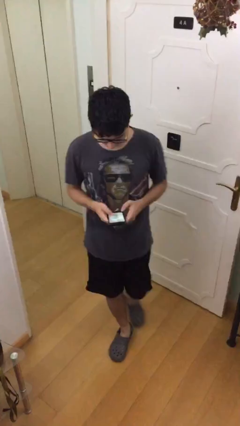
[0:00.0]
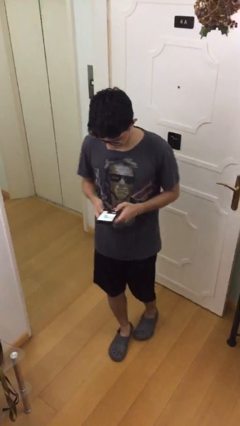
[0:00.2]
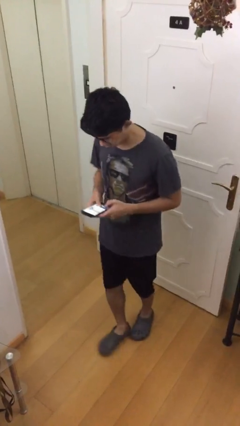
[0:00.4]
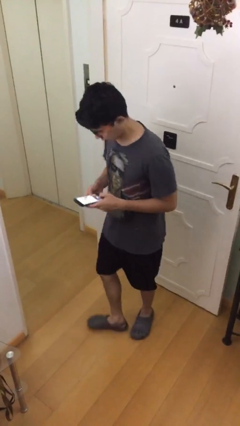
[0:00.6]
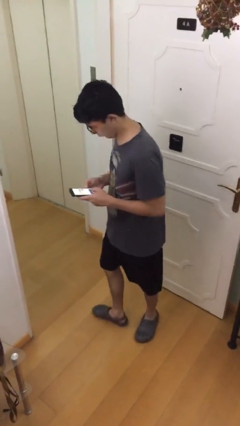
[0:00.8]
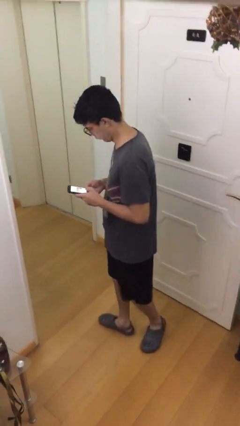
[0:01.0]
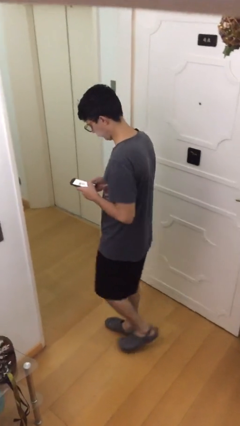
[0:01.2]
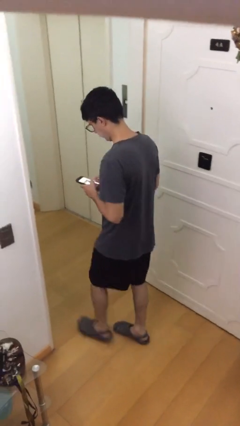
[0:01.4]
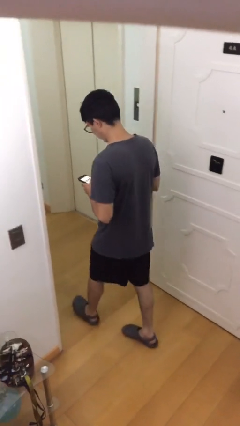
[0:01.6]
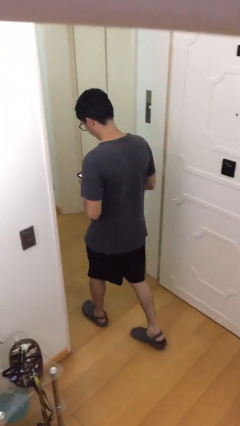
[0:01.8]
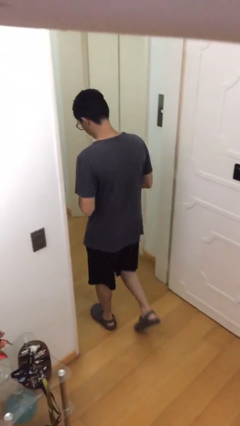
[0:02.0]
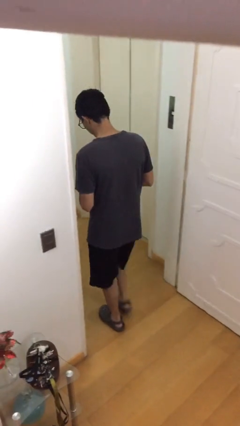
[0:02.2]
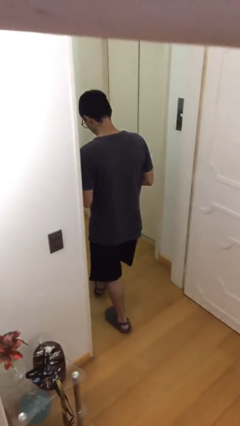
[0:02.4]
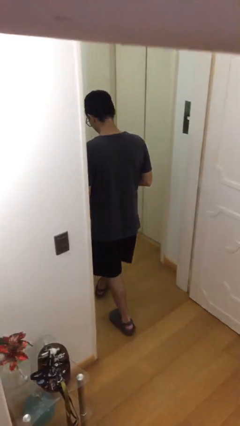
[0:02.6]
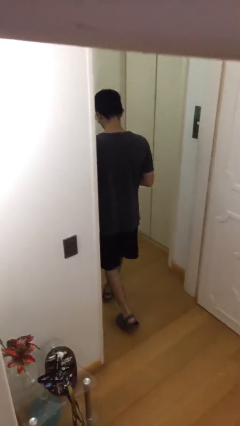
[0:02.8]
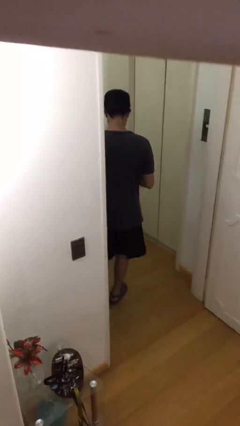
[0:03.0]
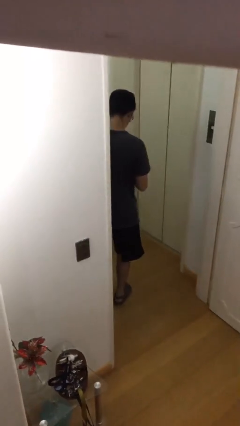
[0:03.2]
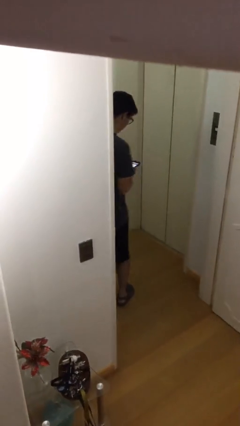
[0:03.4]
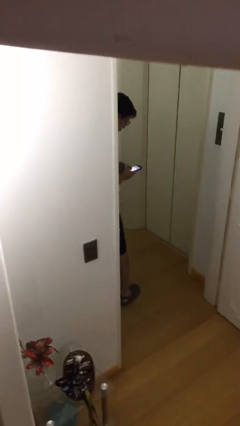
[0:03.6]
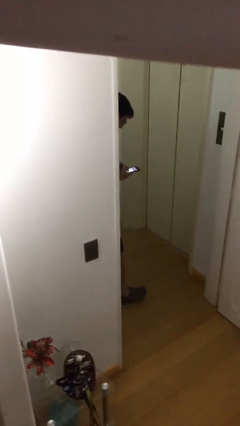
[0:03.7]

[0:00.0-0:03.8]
person exits scene through structure

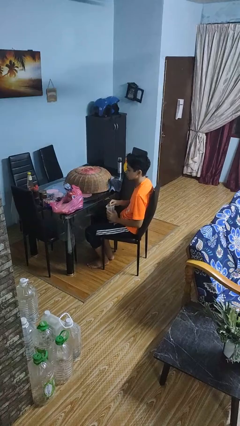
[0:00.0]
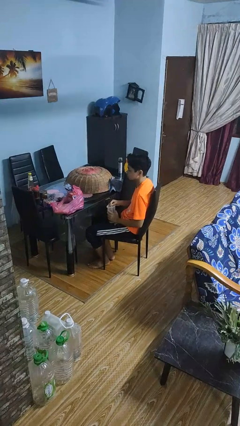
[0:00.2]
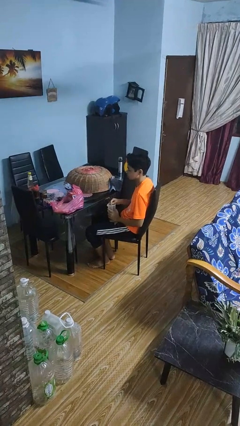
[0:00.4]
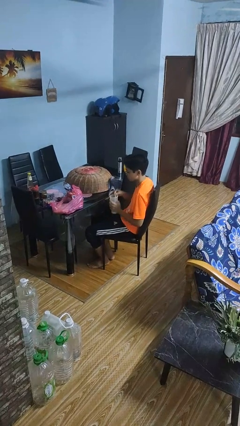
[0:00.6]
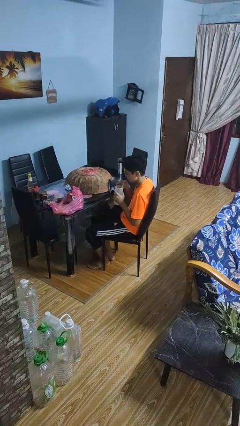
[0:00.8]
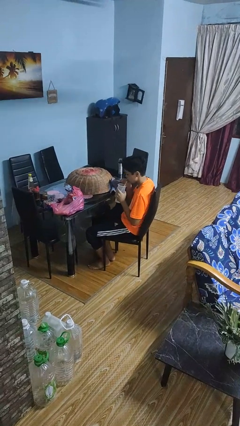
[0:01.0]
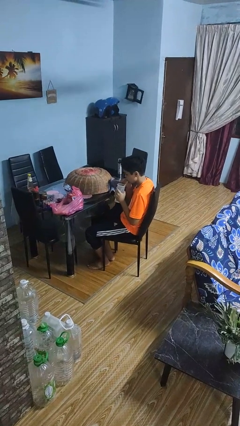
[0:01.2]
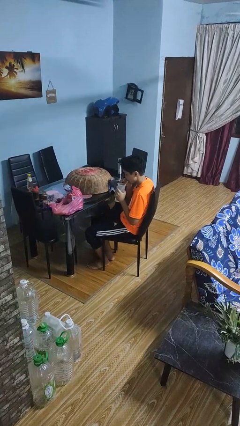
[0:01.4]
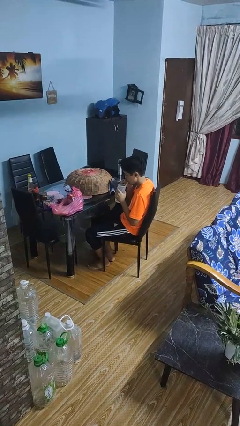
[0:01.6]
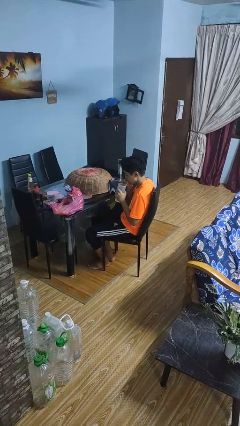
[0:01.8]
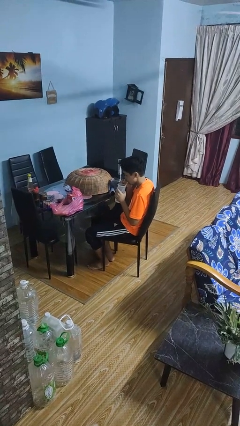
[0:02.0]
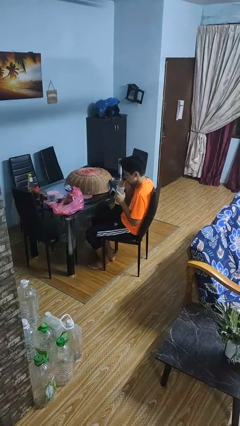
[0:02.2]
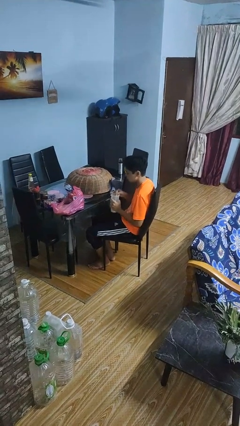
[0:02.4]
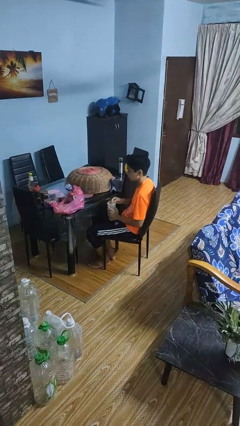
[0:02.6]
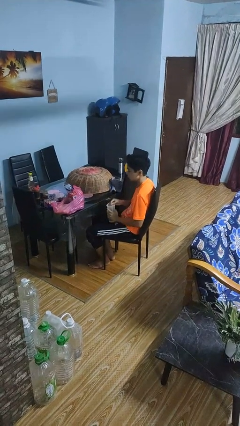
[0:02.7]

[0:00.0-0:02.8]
person drinks from straw

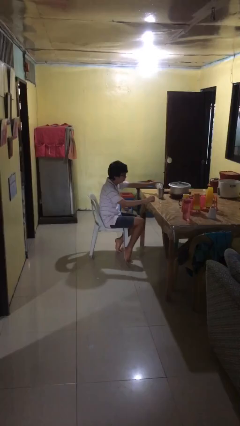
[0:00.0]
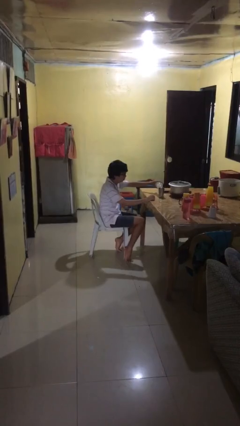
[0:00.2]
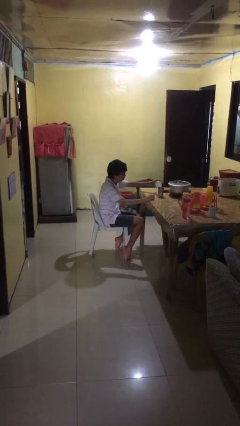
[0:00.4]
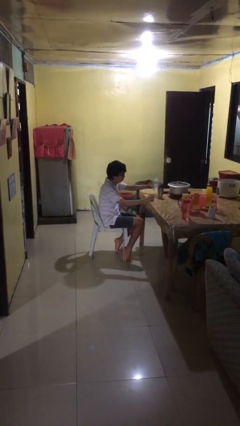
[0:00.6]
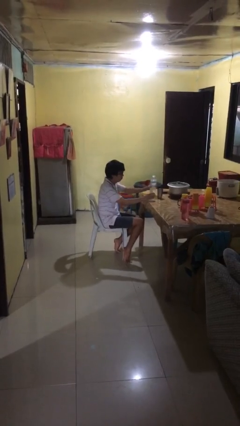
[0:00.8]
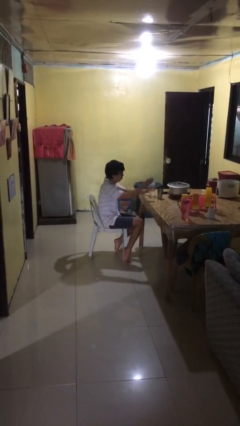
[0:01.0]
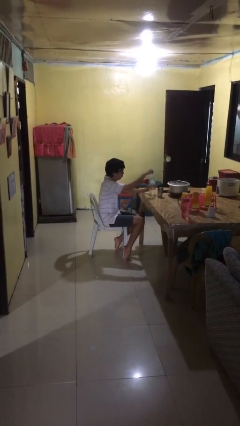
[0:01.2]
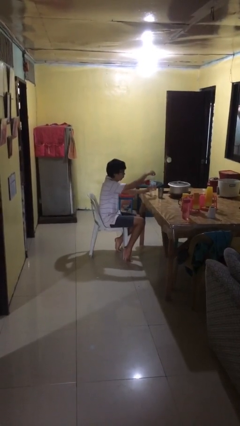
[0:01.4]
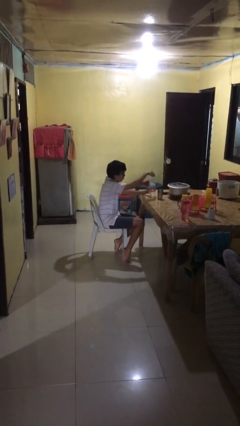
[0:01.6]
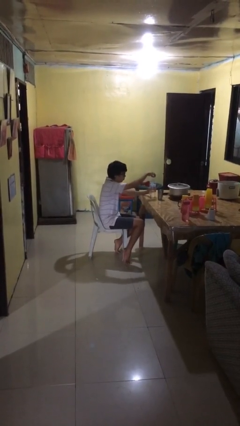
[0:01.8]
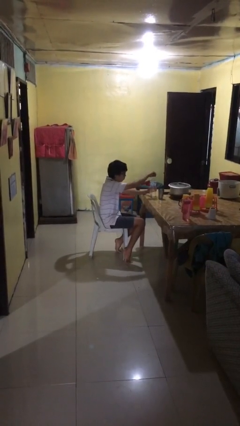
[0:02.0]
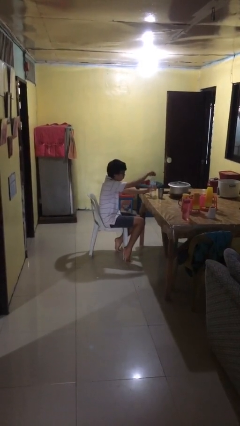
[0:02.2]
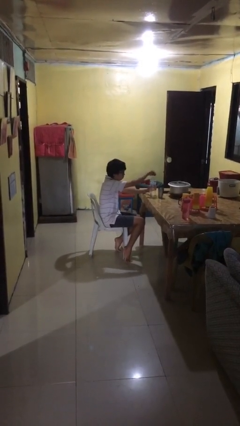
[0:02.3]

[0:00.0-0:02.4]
person screws lid to bottle

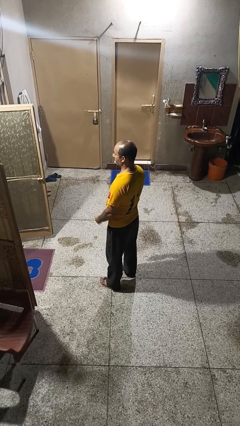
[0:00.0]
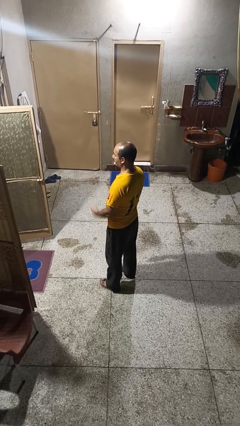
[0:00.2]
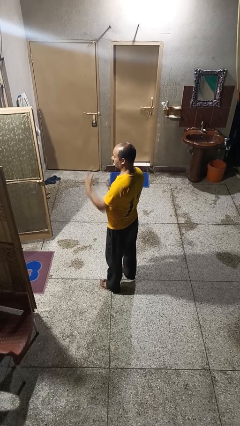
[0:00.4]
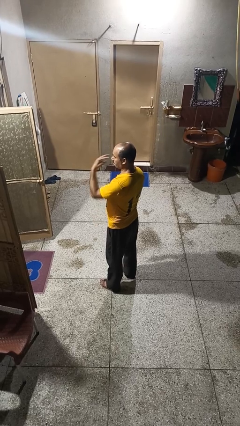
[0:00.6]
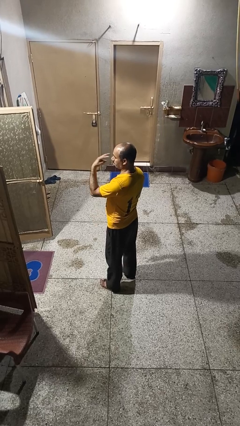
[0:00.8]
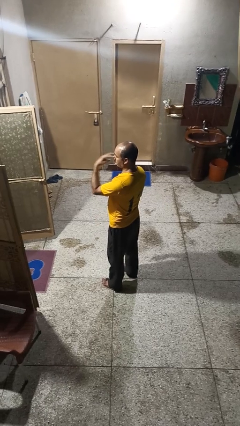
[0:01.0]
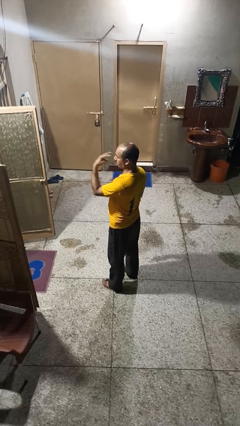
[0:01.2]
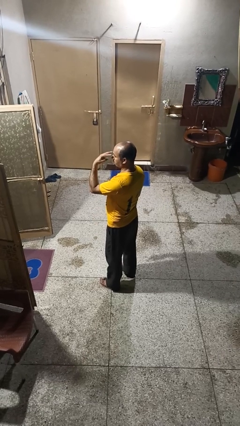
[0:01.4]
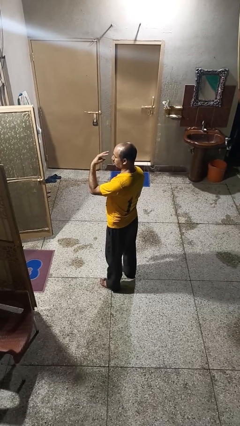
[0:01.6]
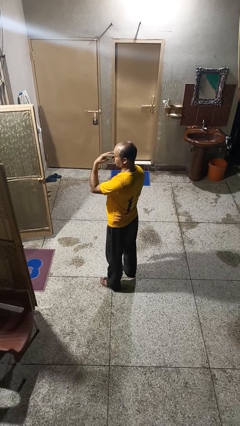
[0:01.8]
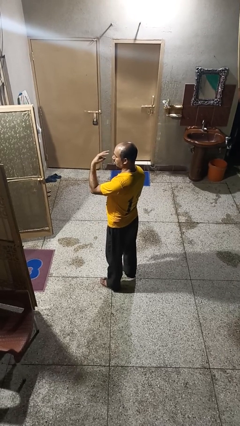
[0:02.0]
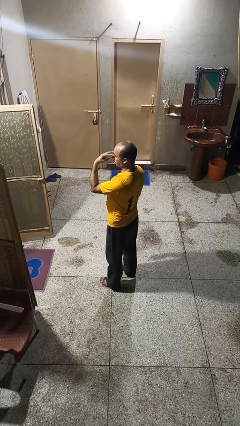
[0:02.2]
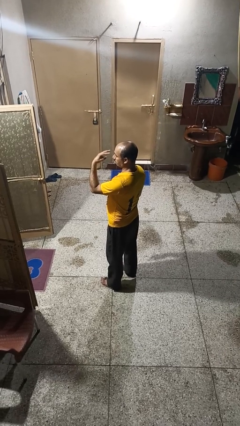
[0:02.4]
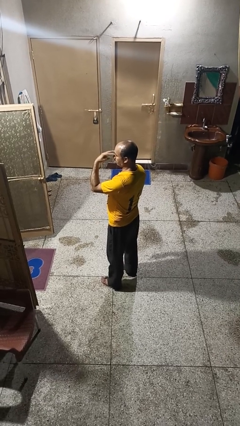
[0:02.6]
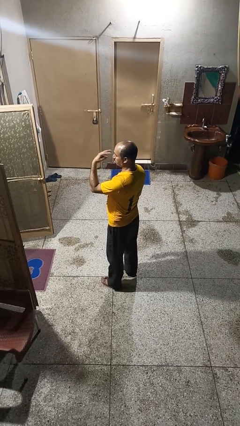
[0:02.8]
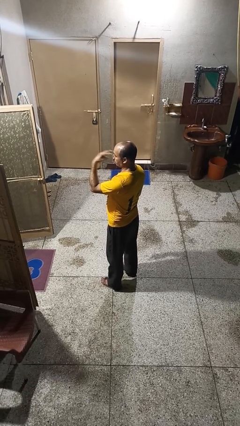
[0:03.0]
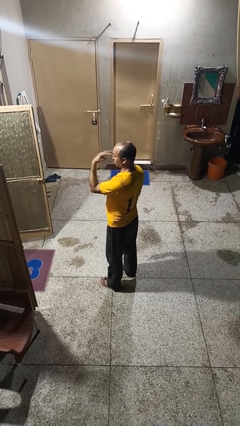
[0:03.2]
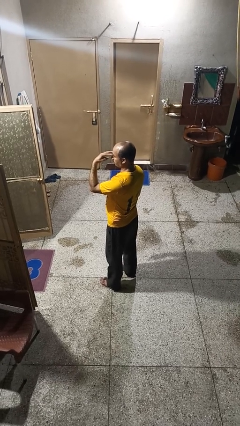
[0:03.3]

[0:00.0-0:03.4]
person gestures watch closely

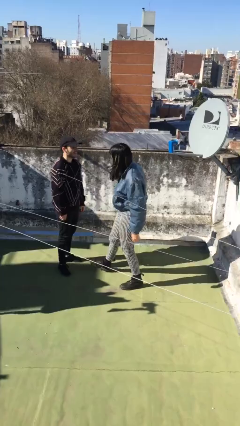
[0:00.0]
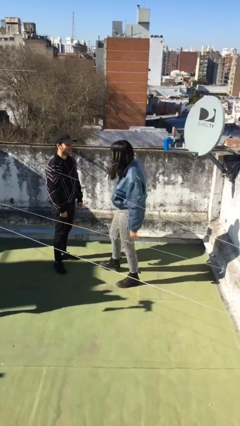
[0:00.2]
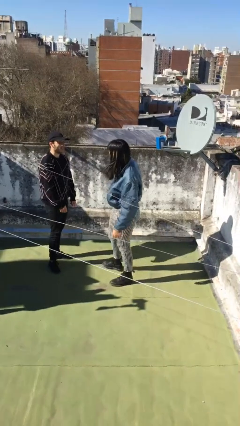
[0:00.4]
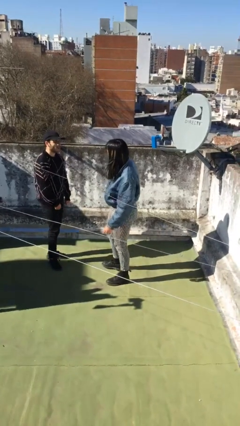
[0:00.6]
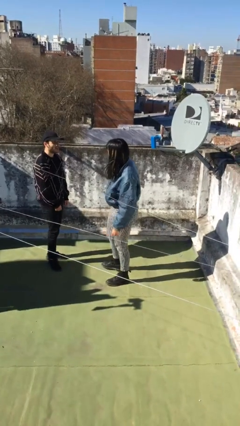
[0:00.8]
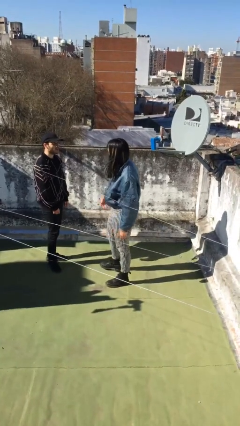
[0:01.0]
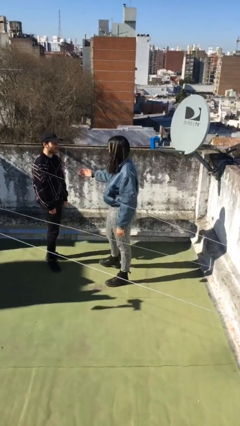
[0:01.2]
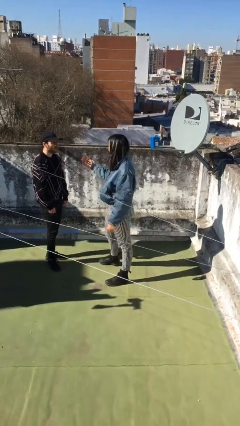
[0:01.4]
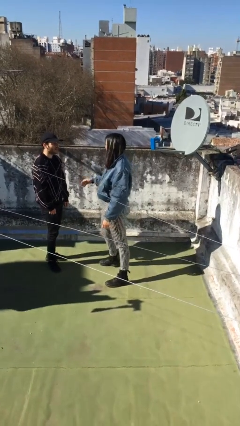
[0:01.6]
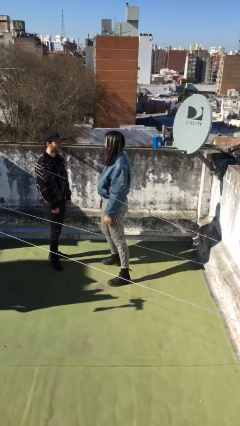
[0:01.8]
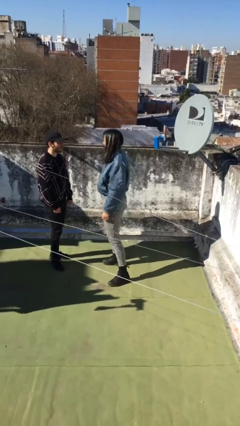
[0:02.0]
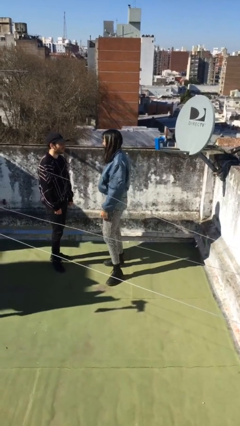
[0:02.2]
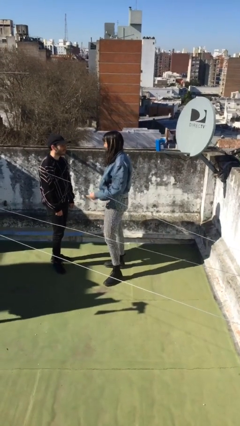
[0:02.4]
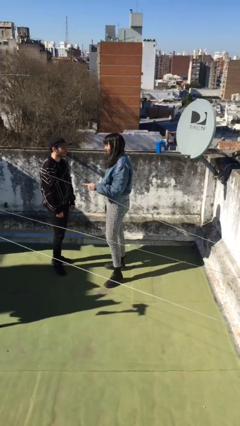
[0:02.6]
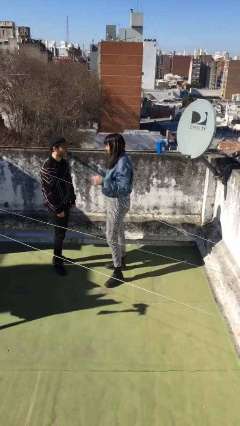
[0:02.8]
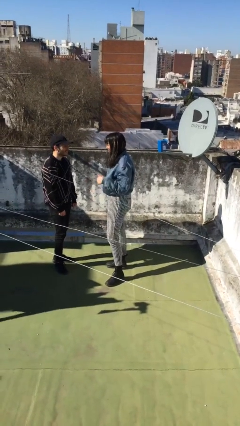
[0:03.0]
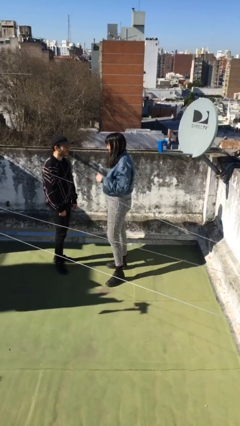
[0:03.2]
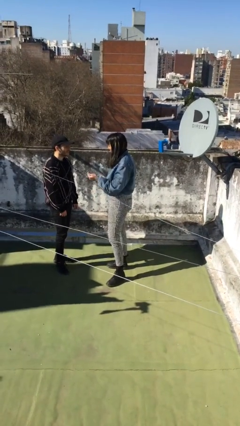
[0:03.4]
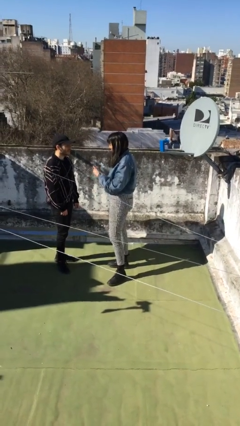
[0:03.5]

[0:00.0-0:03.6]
person talks to person

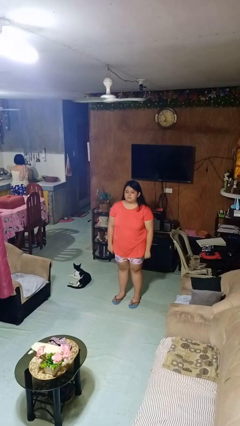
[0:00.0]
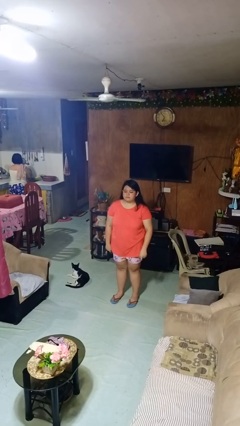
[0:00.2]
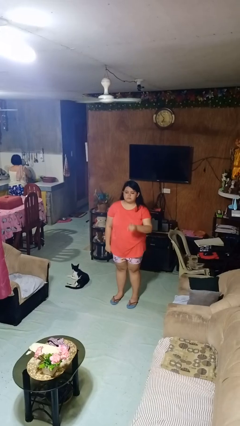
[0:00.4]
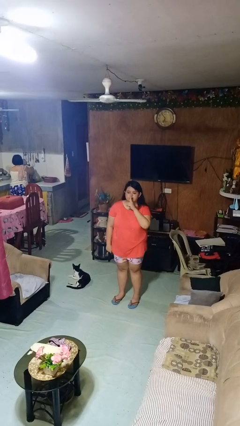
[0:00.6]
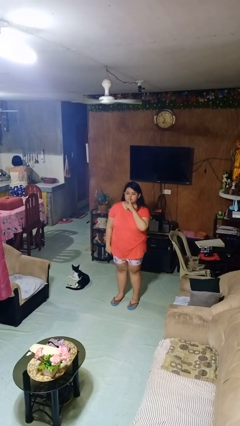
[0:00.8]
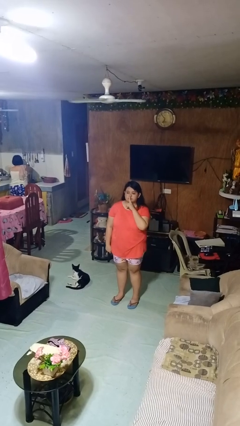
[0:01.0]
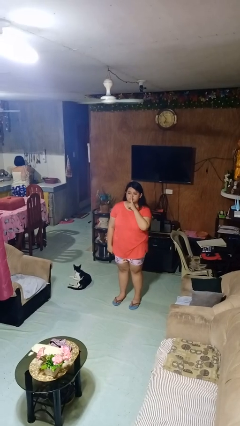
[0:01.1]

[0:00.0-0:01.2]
person gestures be quiet
